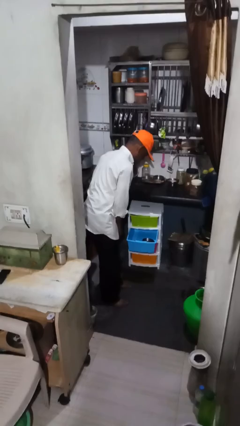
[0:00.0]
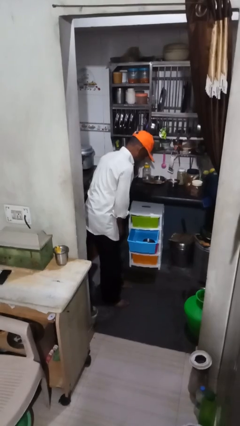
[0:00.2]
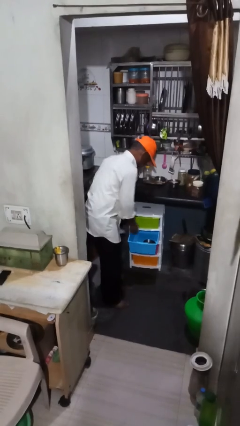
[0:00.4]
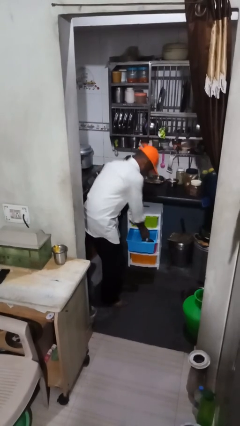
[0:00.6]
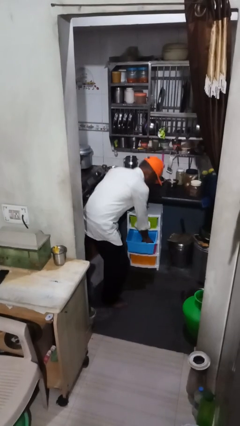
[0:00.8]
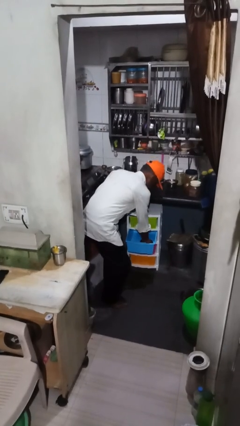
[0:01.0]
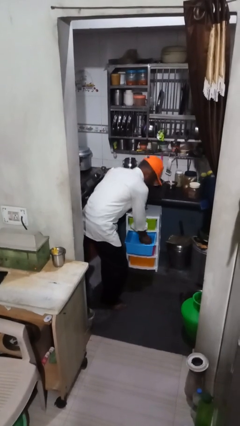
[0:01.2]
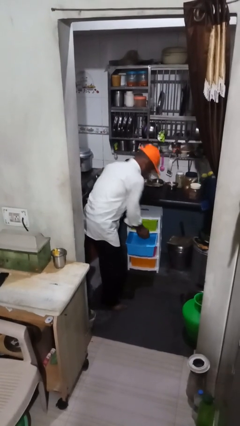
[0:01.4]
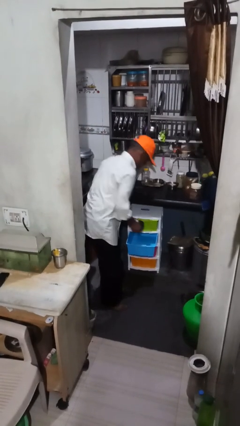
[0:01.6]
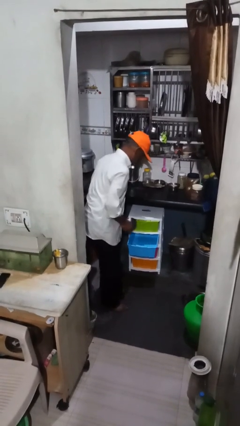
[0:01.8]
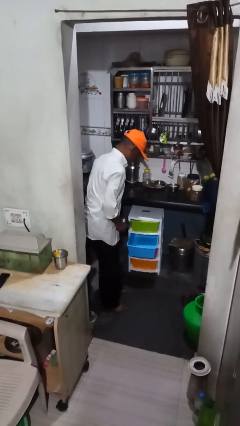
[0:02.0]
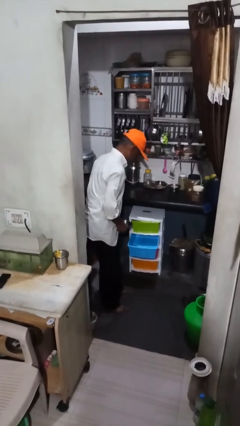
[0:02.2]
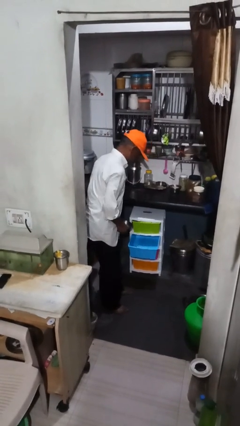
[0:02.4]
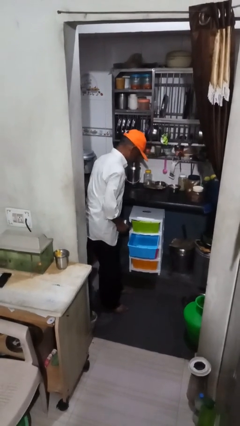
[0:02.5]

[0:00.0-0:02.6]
person takes object from cabinet

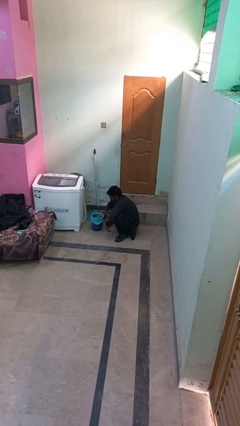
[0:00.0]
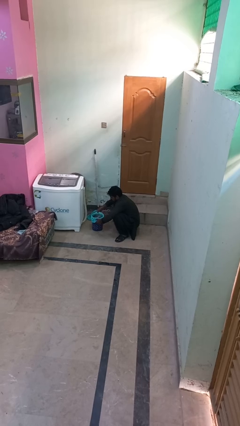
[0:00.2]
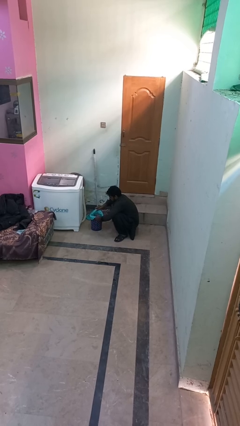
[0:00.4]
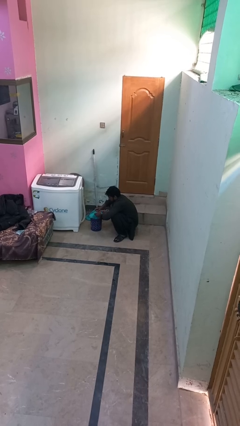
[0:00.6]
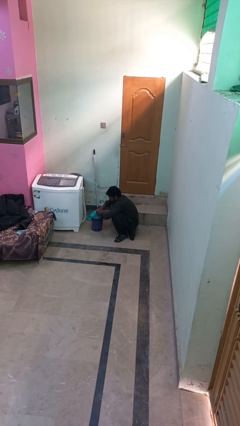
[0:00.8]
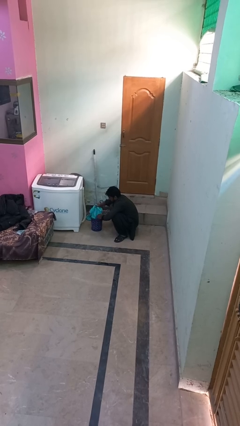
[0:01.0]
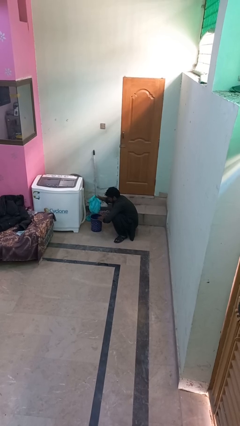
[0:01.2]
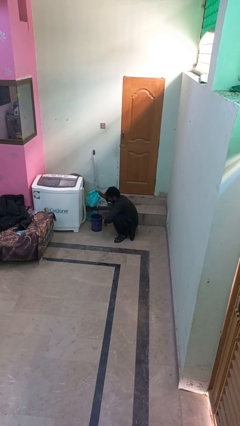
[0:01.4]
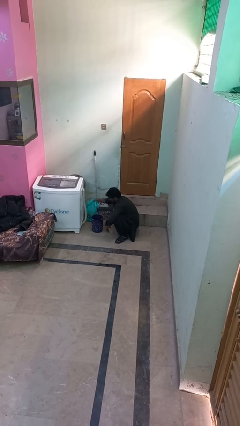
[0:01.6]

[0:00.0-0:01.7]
person removes trashbag from trashcan

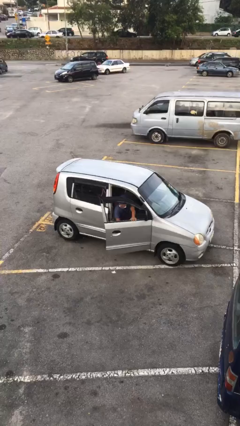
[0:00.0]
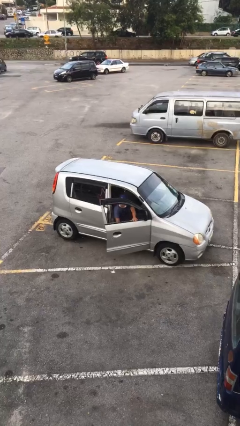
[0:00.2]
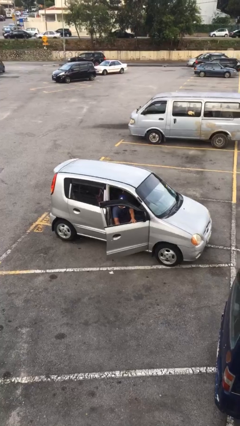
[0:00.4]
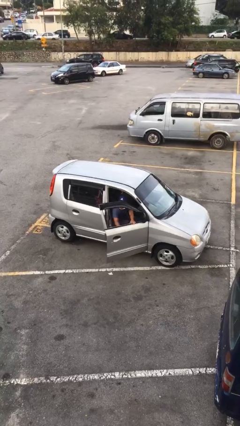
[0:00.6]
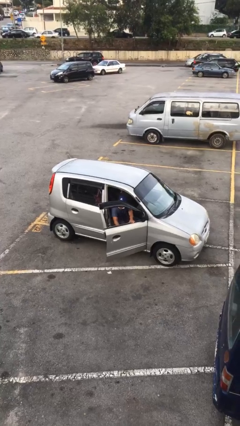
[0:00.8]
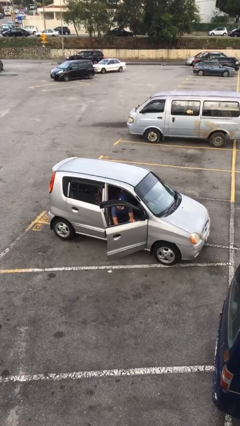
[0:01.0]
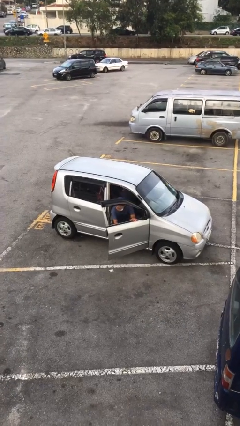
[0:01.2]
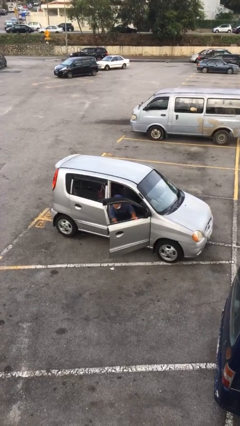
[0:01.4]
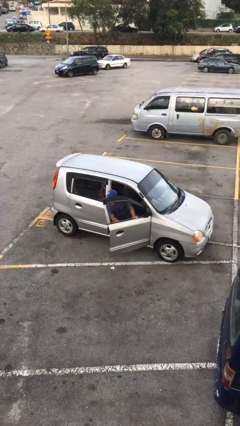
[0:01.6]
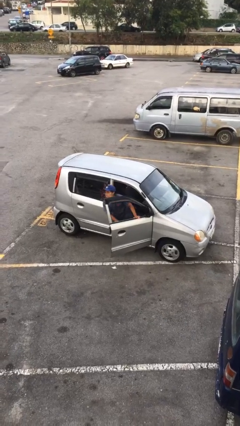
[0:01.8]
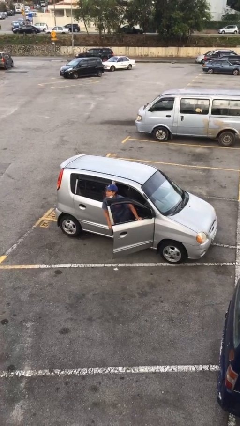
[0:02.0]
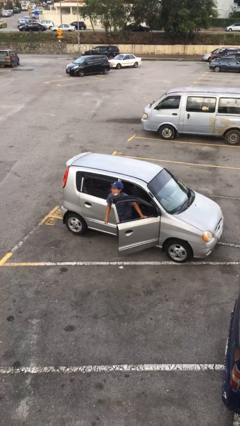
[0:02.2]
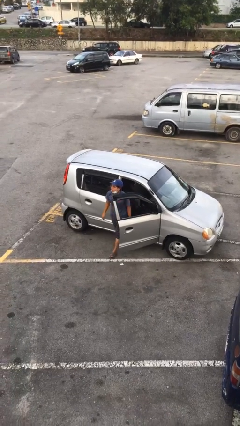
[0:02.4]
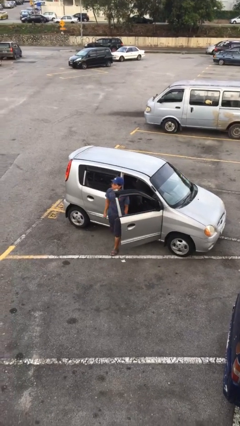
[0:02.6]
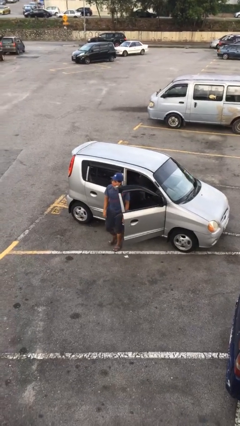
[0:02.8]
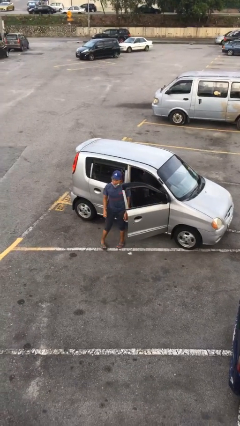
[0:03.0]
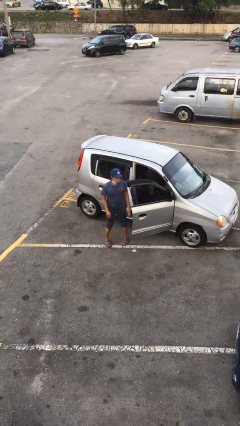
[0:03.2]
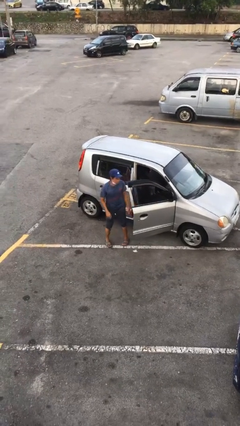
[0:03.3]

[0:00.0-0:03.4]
person exits car

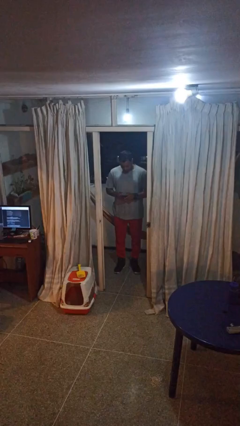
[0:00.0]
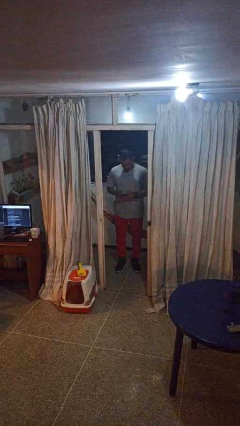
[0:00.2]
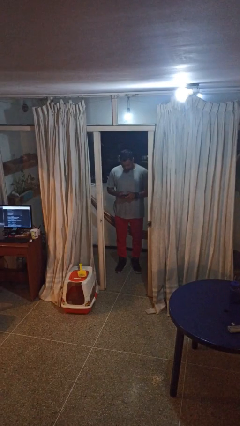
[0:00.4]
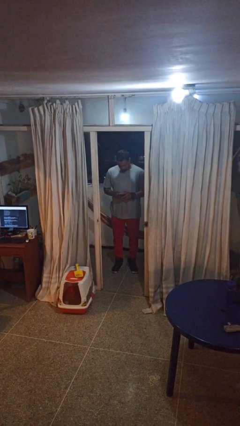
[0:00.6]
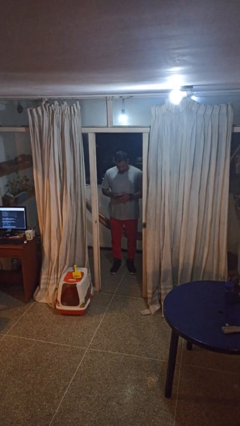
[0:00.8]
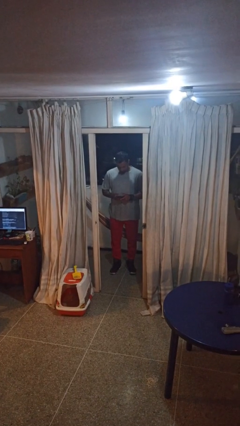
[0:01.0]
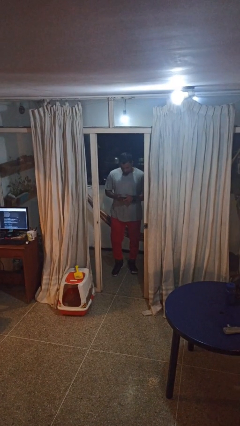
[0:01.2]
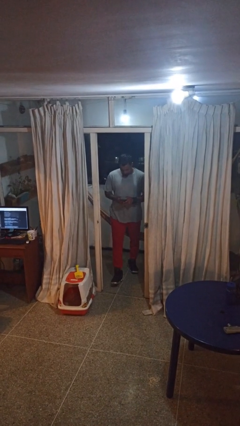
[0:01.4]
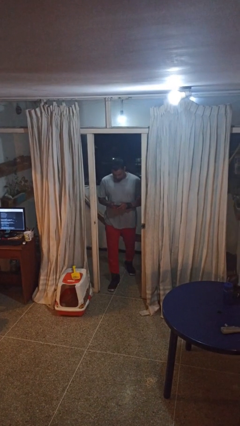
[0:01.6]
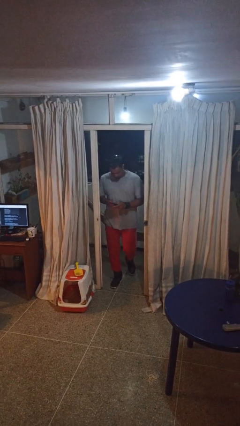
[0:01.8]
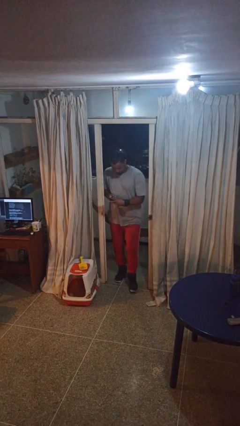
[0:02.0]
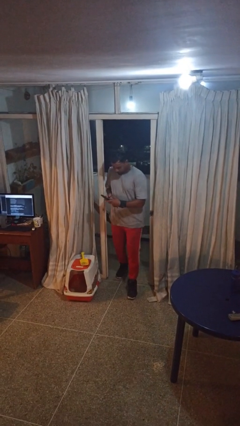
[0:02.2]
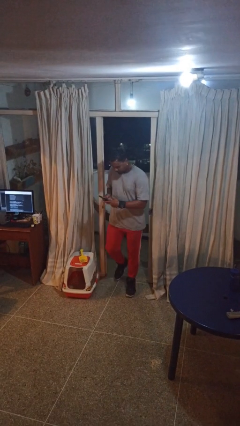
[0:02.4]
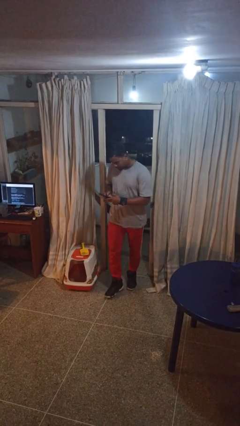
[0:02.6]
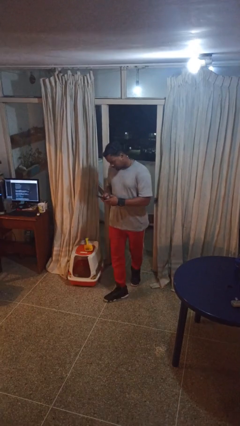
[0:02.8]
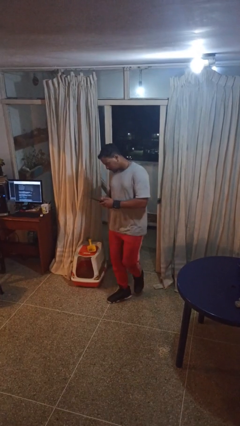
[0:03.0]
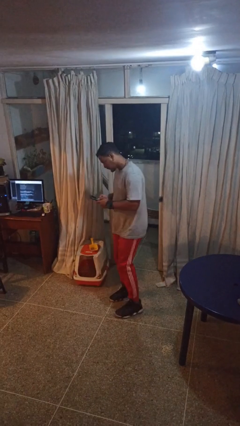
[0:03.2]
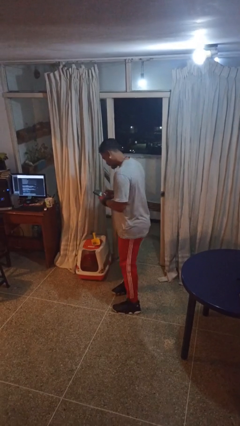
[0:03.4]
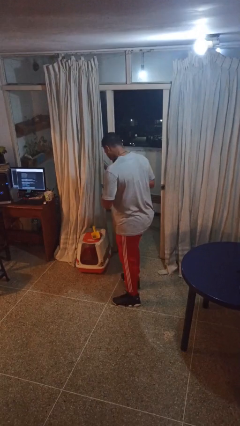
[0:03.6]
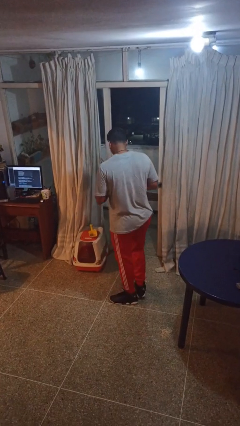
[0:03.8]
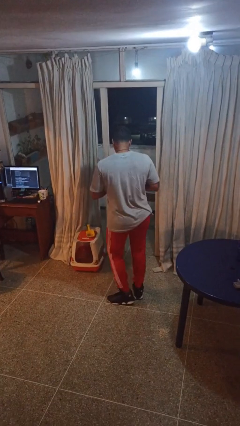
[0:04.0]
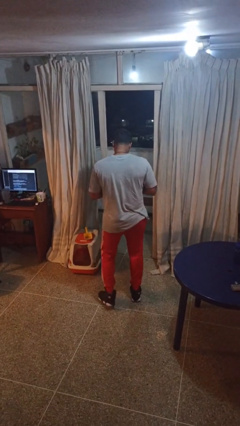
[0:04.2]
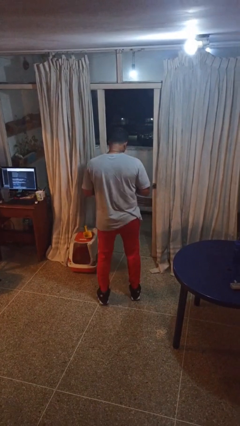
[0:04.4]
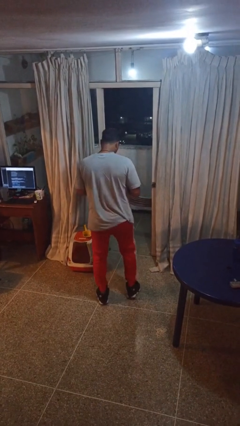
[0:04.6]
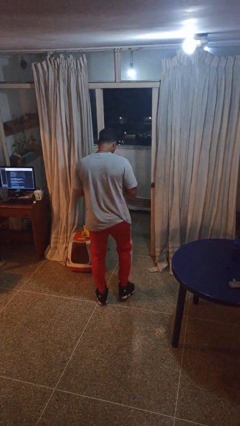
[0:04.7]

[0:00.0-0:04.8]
person enters scene through structure

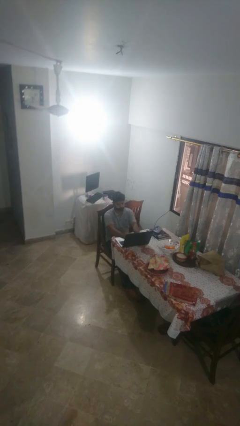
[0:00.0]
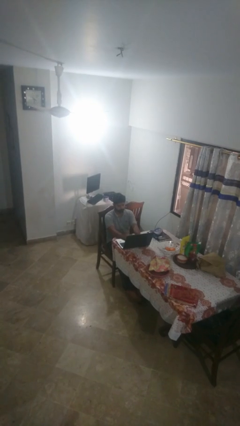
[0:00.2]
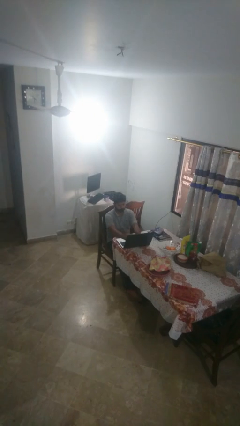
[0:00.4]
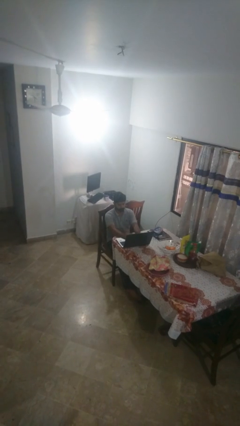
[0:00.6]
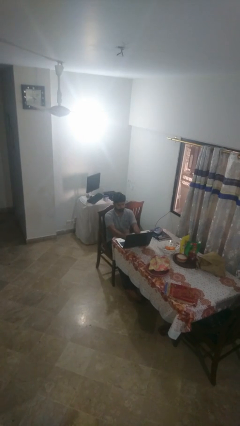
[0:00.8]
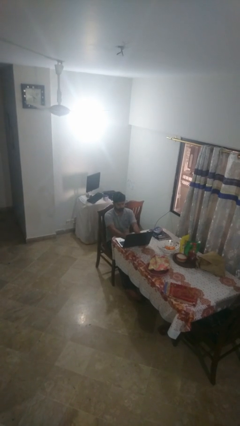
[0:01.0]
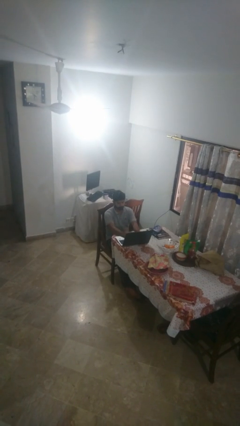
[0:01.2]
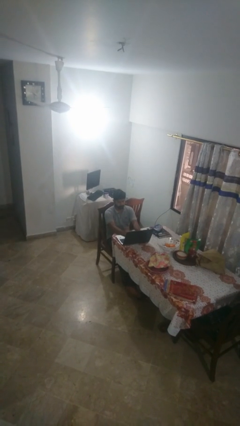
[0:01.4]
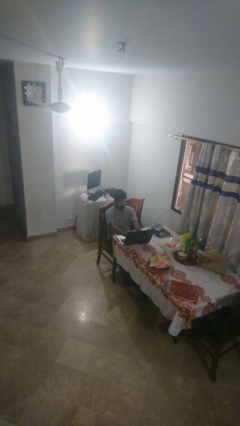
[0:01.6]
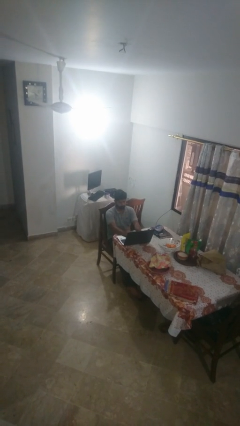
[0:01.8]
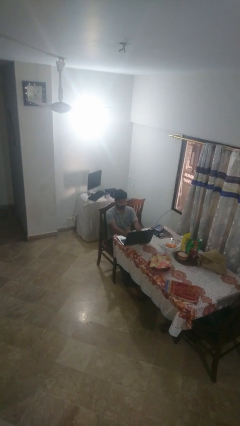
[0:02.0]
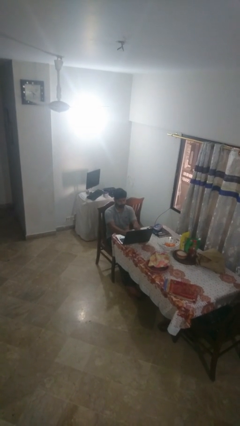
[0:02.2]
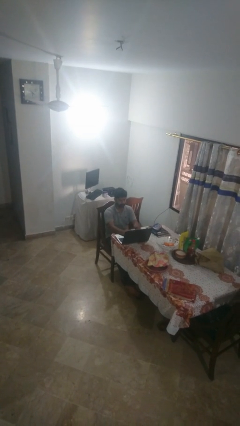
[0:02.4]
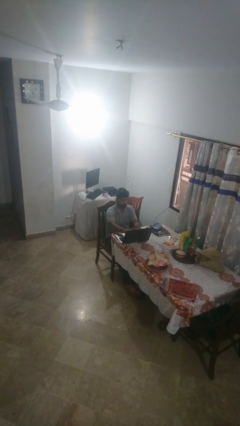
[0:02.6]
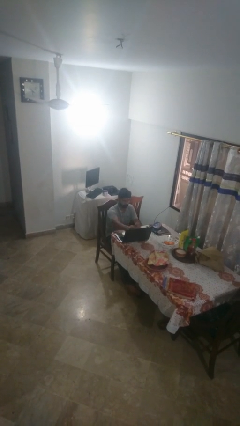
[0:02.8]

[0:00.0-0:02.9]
person interacts with laptop

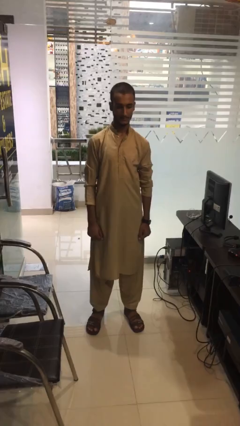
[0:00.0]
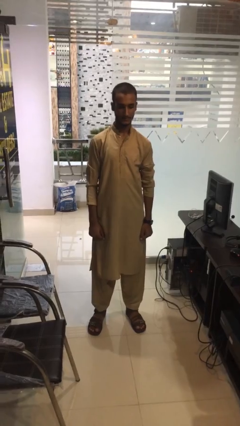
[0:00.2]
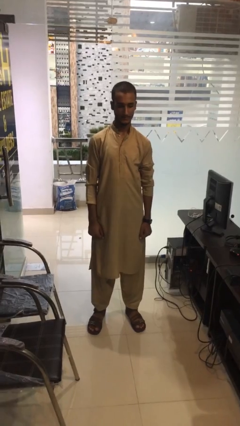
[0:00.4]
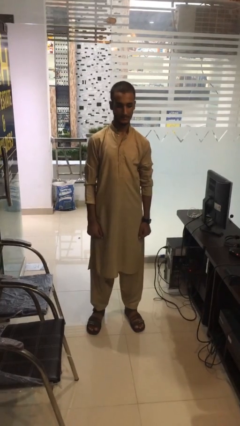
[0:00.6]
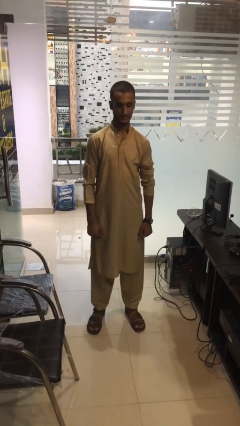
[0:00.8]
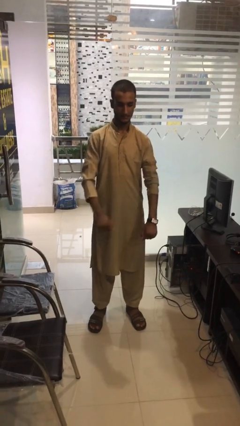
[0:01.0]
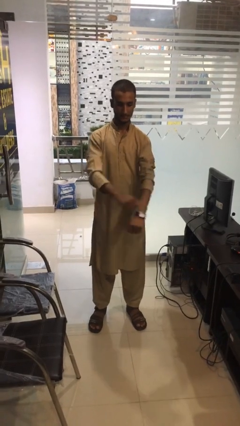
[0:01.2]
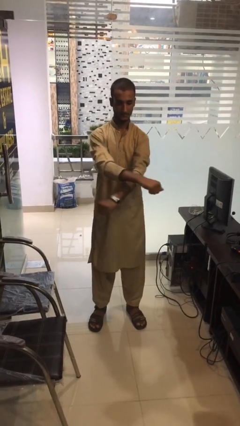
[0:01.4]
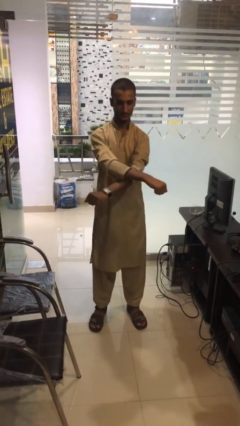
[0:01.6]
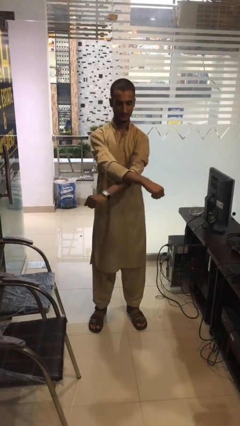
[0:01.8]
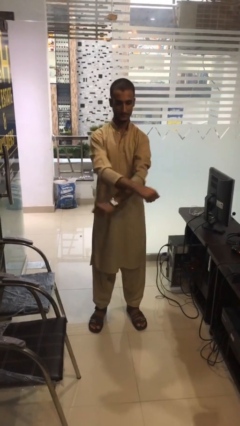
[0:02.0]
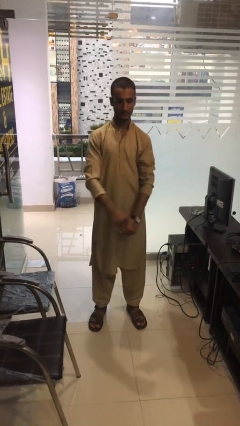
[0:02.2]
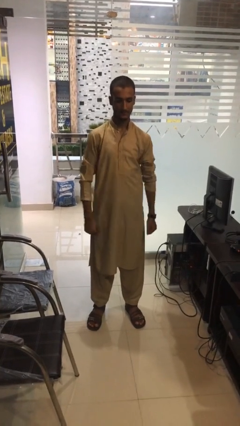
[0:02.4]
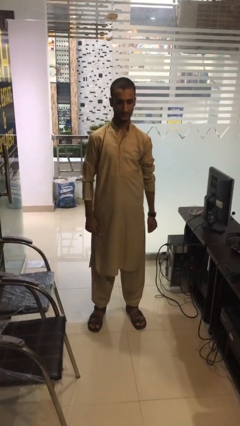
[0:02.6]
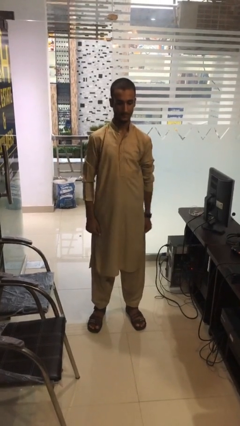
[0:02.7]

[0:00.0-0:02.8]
person gestures arms x

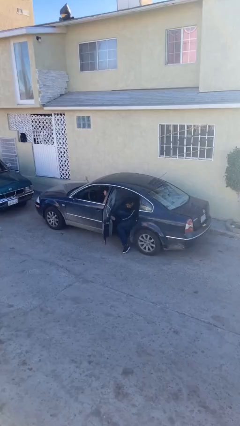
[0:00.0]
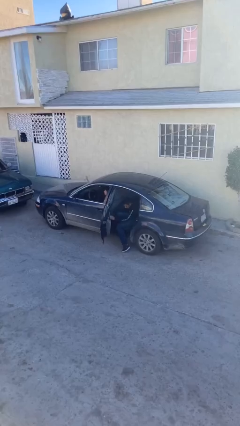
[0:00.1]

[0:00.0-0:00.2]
car drops off person
